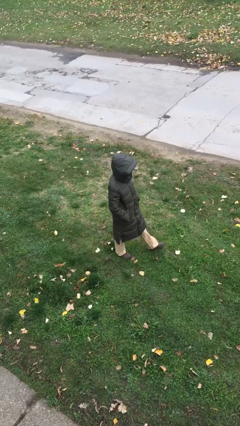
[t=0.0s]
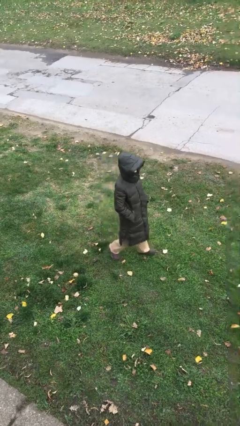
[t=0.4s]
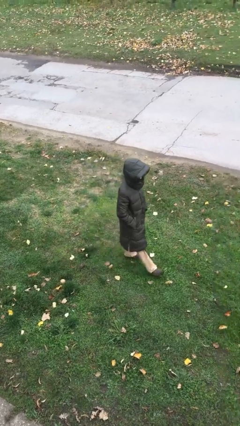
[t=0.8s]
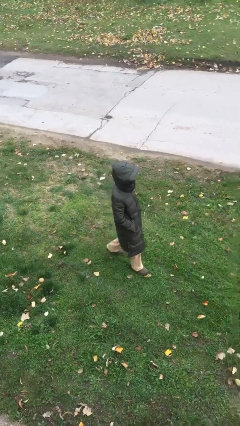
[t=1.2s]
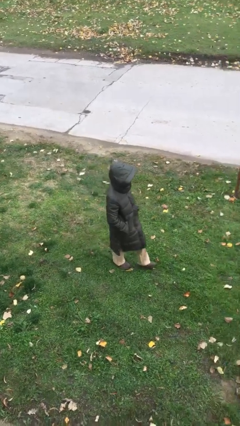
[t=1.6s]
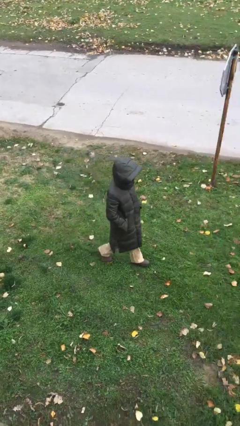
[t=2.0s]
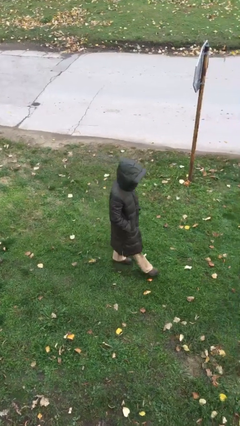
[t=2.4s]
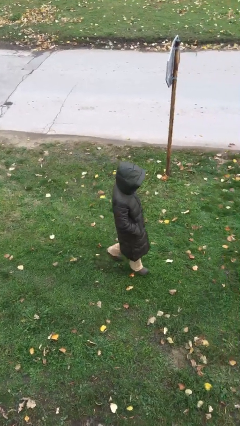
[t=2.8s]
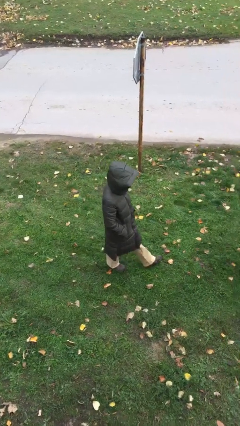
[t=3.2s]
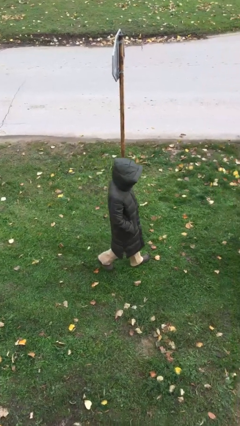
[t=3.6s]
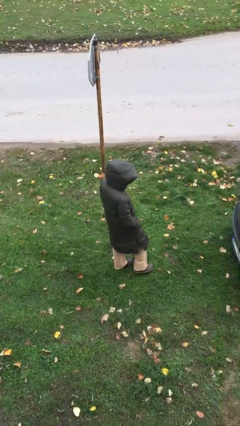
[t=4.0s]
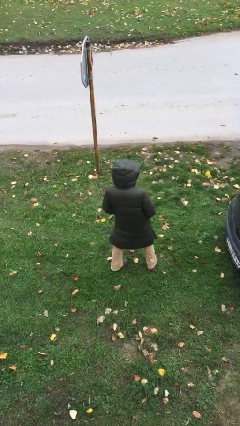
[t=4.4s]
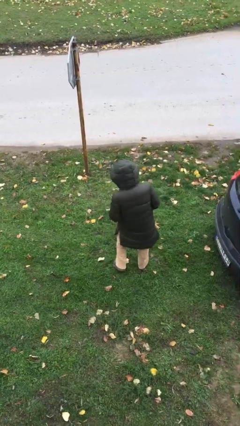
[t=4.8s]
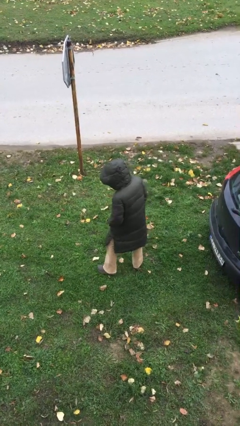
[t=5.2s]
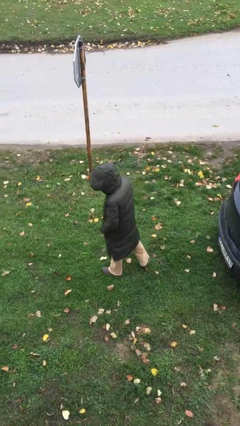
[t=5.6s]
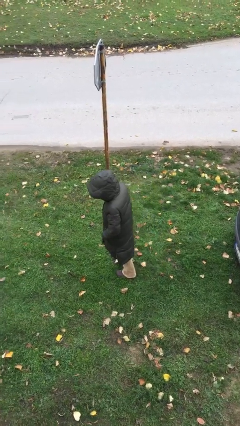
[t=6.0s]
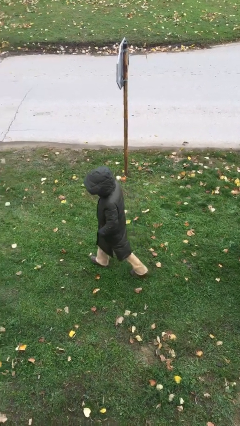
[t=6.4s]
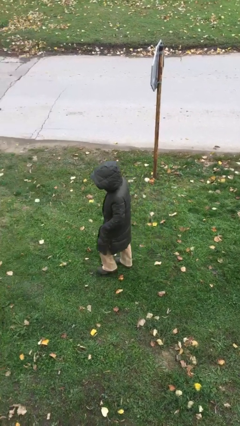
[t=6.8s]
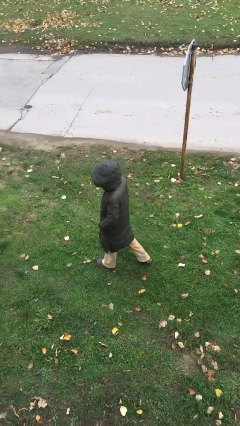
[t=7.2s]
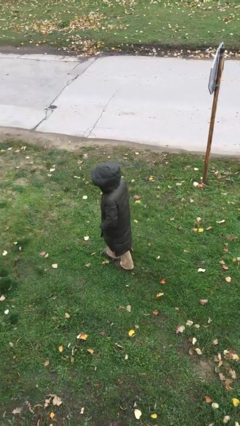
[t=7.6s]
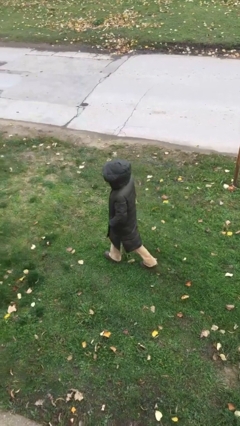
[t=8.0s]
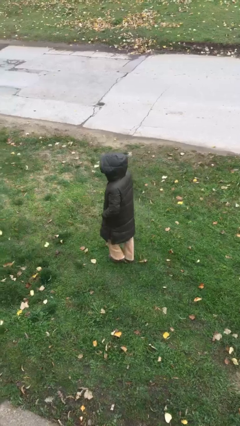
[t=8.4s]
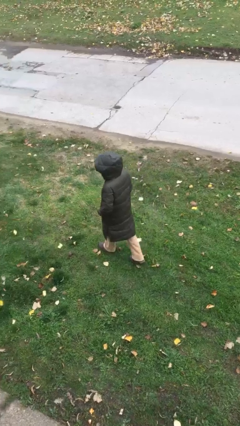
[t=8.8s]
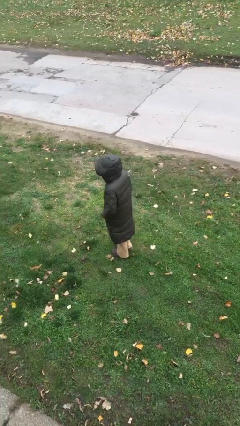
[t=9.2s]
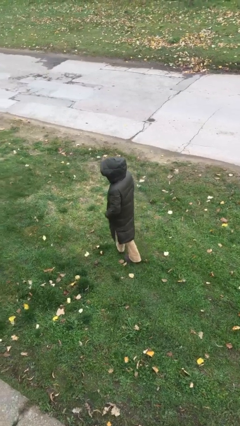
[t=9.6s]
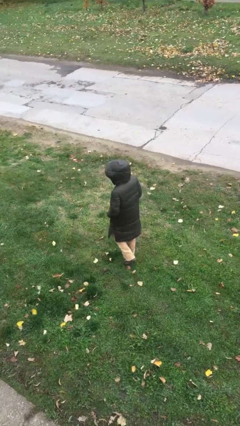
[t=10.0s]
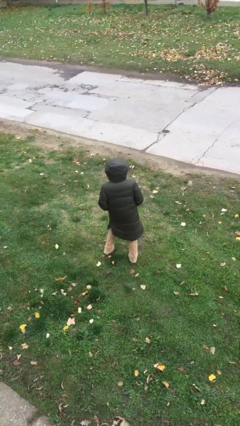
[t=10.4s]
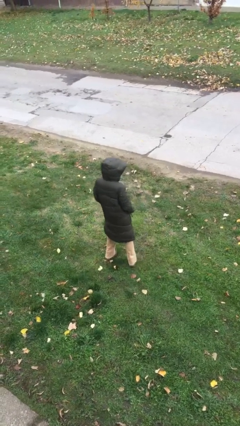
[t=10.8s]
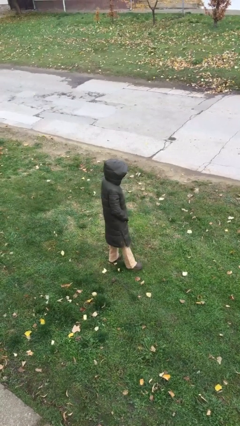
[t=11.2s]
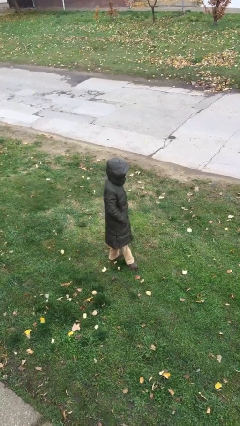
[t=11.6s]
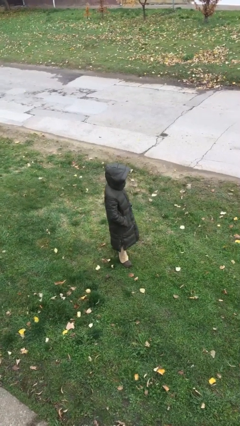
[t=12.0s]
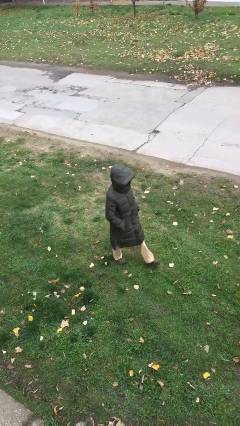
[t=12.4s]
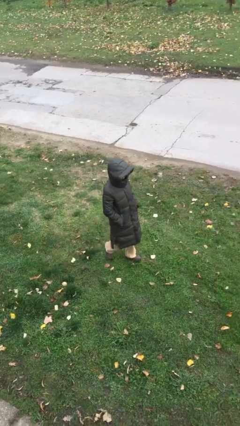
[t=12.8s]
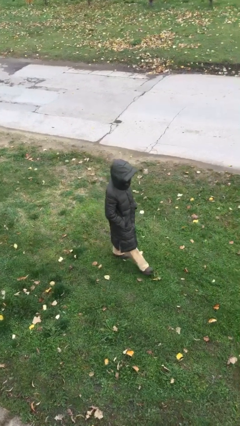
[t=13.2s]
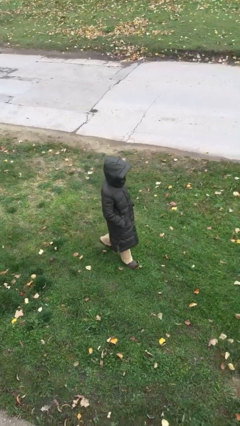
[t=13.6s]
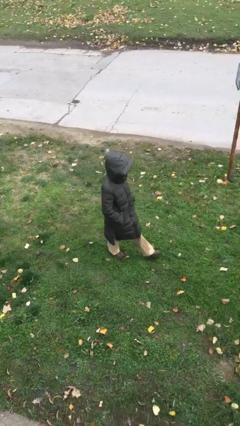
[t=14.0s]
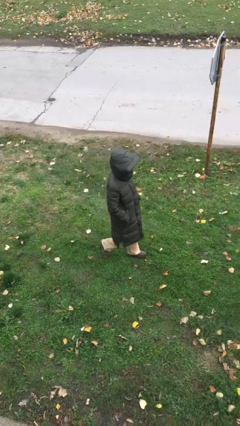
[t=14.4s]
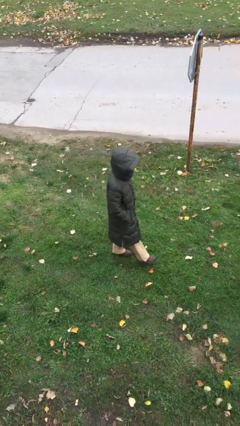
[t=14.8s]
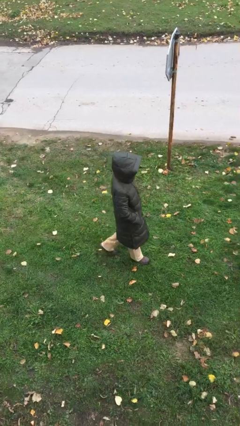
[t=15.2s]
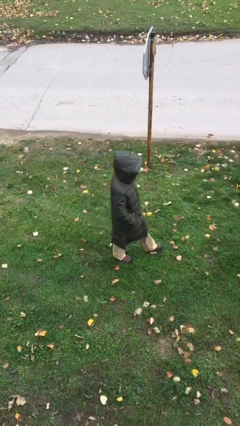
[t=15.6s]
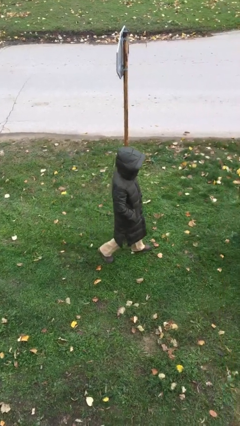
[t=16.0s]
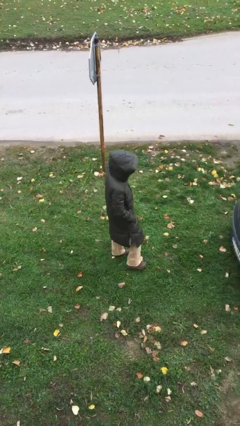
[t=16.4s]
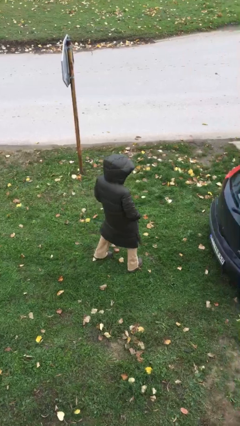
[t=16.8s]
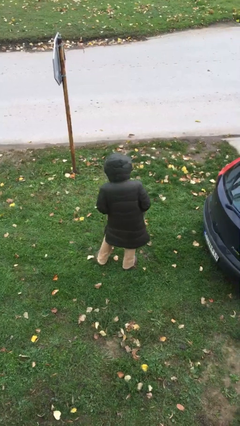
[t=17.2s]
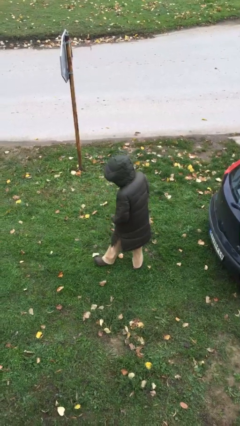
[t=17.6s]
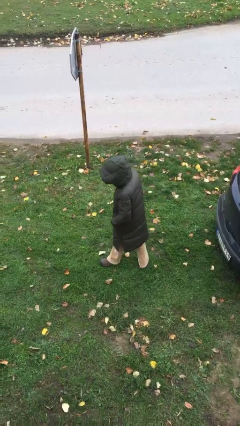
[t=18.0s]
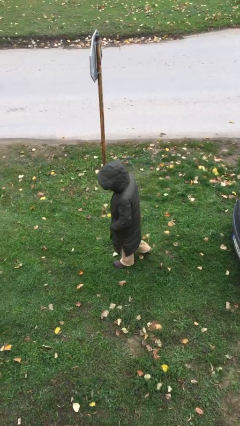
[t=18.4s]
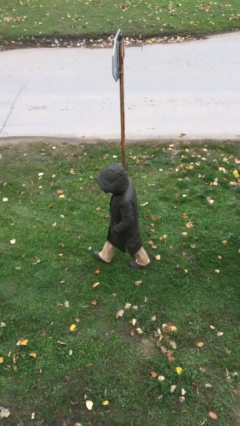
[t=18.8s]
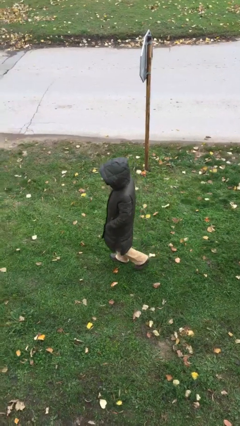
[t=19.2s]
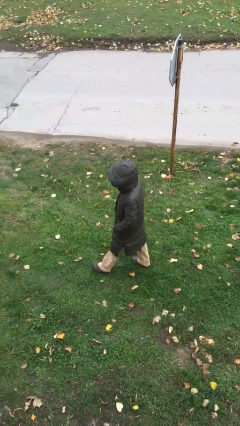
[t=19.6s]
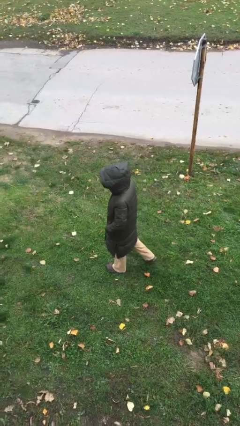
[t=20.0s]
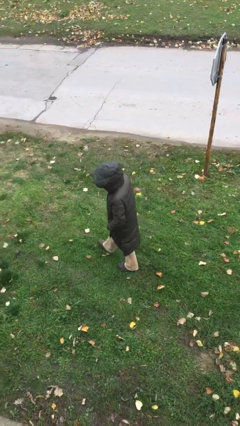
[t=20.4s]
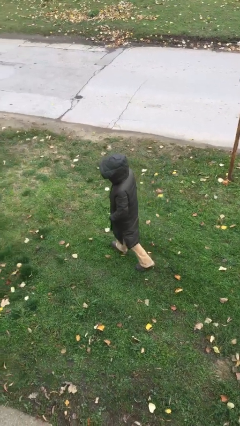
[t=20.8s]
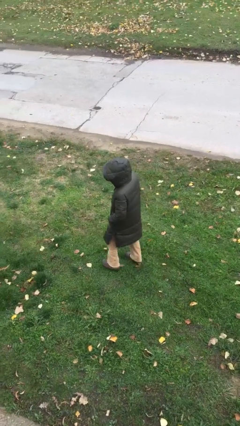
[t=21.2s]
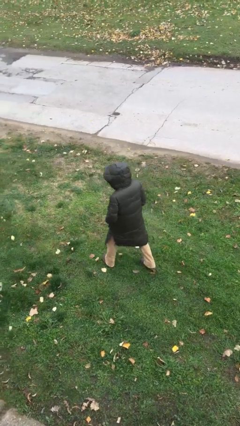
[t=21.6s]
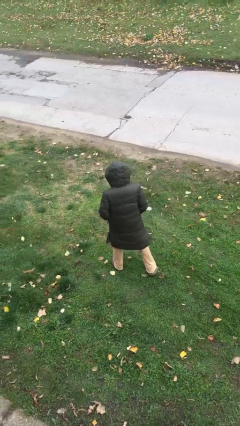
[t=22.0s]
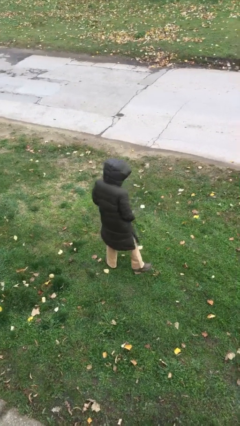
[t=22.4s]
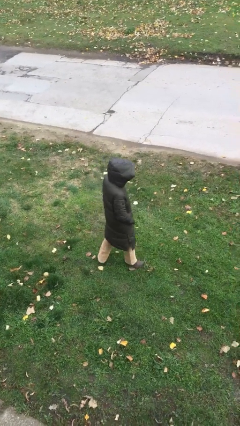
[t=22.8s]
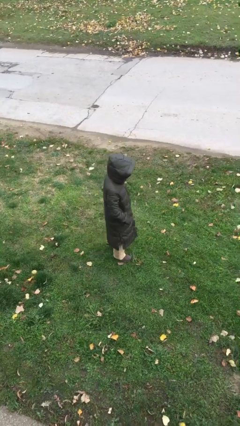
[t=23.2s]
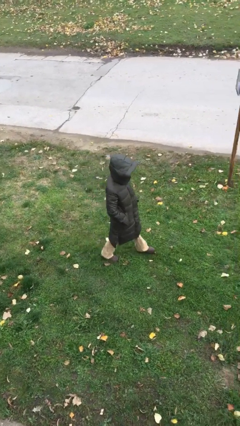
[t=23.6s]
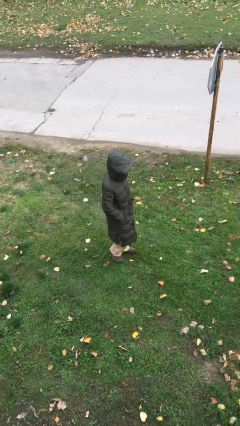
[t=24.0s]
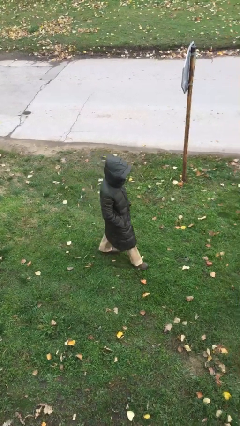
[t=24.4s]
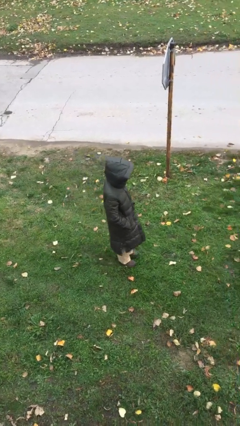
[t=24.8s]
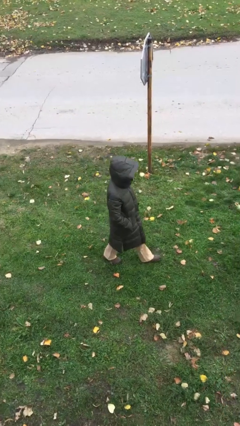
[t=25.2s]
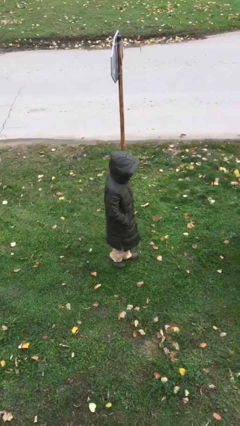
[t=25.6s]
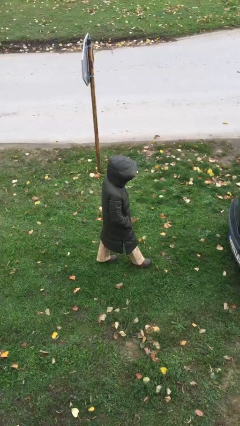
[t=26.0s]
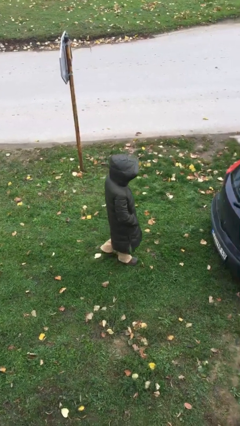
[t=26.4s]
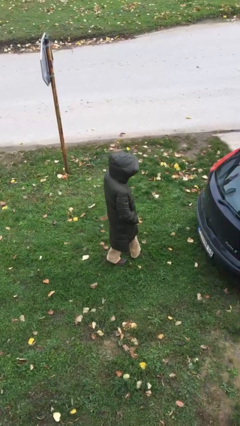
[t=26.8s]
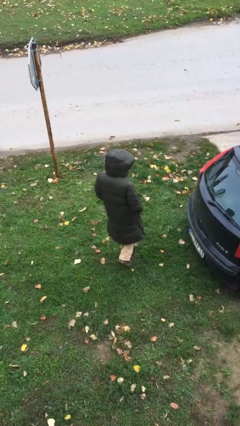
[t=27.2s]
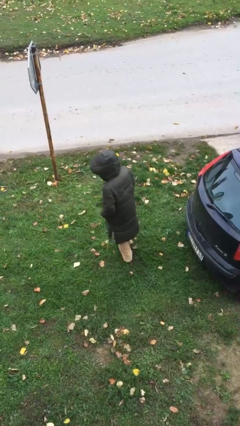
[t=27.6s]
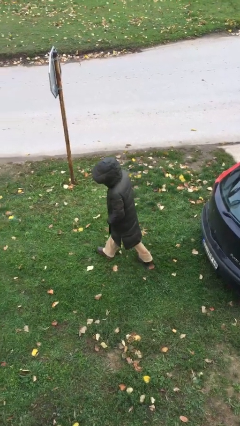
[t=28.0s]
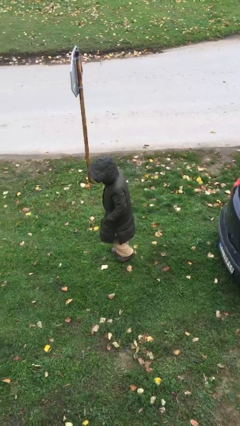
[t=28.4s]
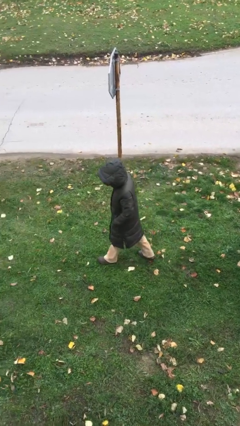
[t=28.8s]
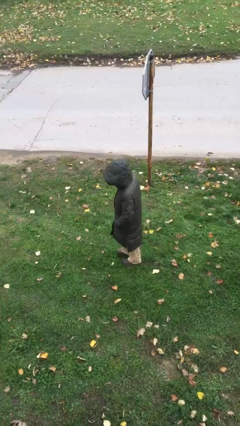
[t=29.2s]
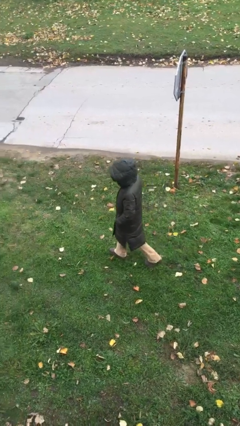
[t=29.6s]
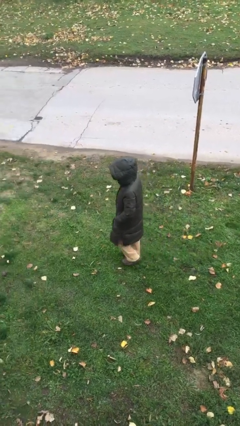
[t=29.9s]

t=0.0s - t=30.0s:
person walks

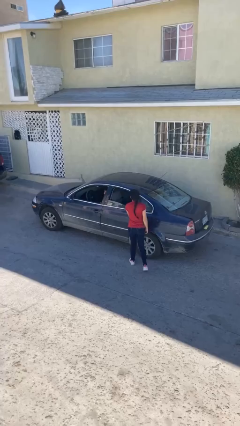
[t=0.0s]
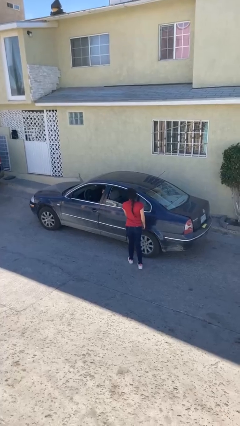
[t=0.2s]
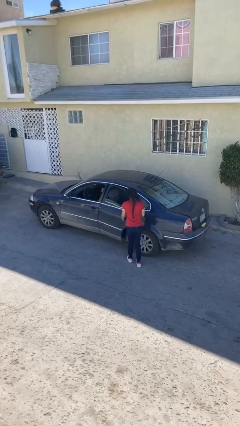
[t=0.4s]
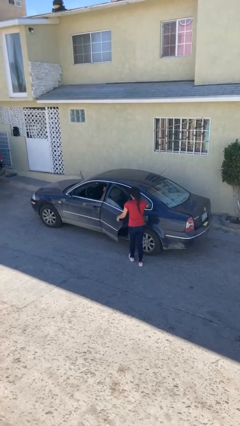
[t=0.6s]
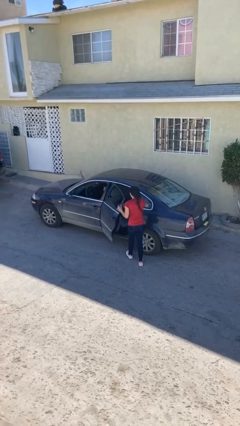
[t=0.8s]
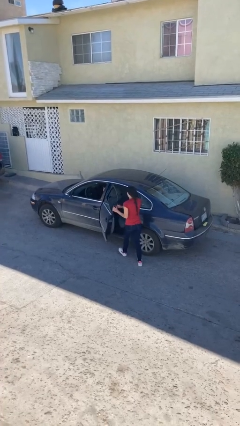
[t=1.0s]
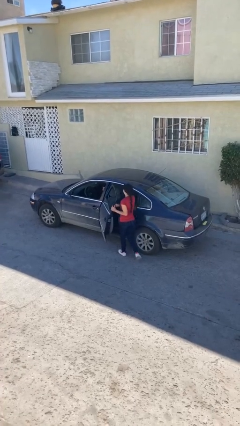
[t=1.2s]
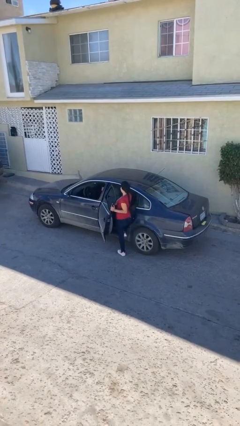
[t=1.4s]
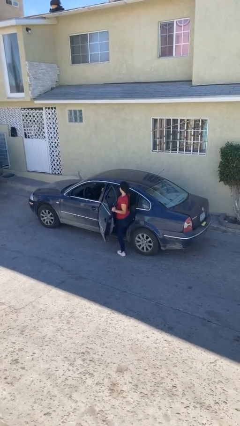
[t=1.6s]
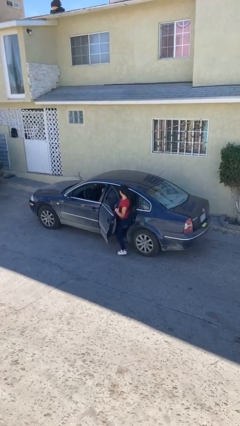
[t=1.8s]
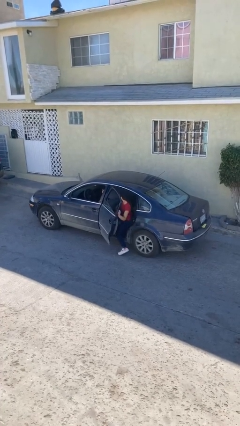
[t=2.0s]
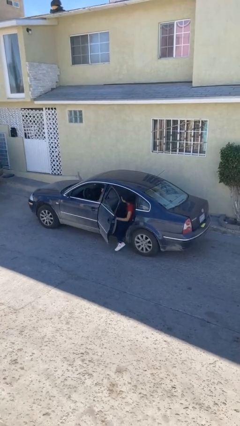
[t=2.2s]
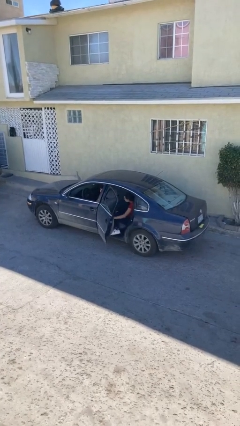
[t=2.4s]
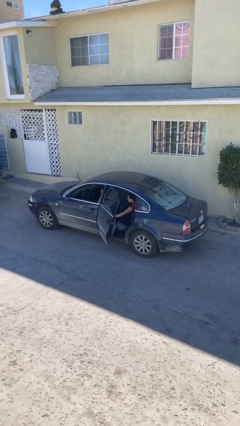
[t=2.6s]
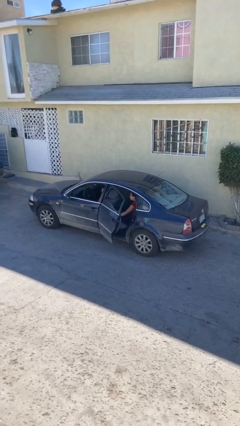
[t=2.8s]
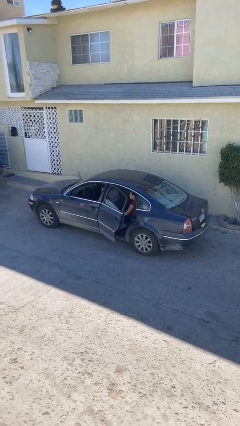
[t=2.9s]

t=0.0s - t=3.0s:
car picks up person
